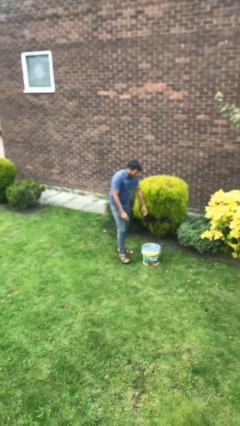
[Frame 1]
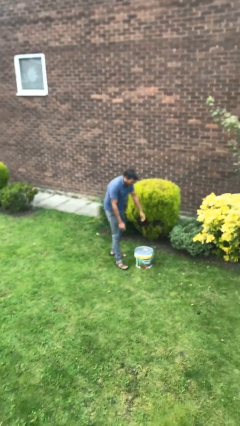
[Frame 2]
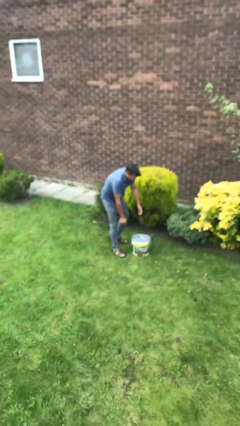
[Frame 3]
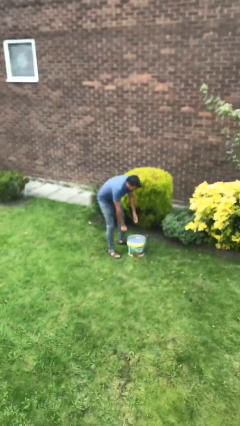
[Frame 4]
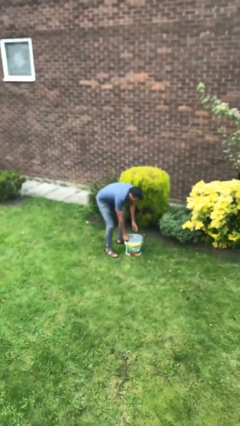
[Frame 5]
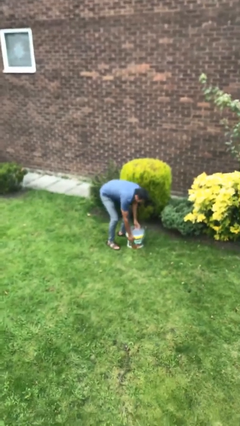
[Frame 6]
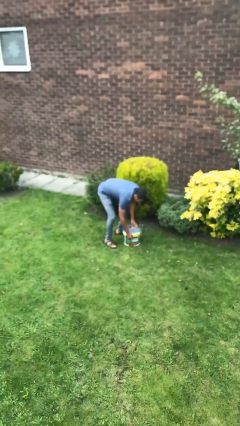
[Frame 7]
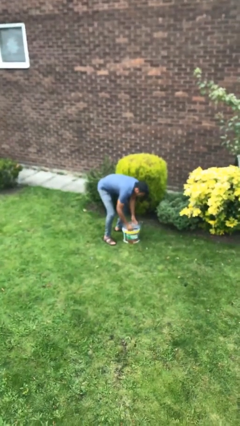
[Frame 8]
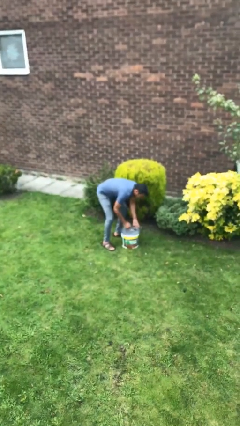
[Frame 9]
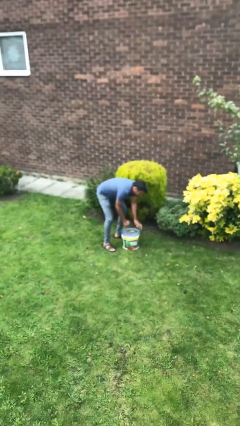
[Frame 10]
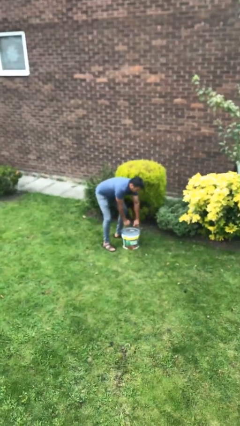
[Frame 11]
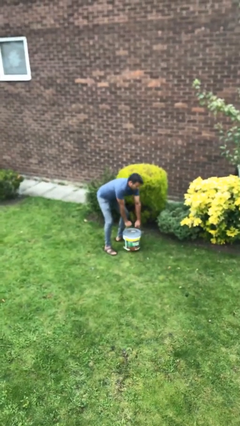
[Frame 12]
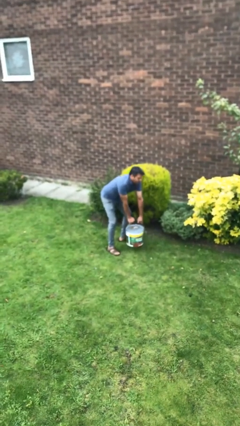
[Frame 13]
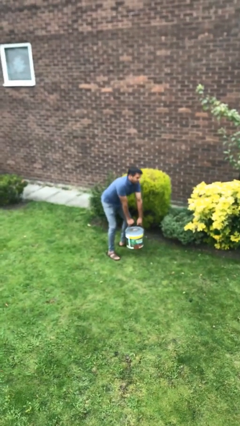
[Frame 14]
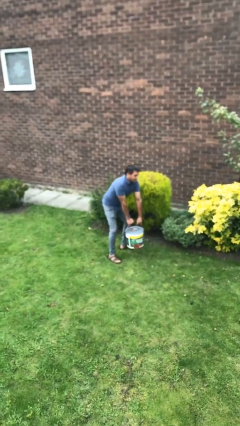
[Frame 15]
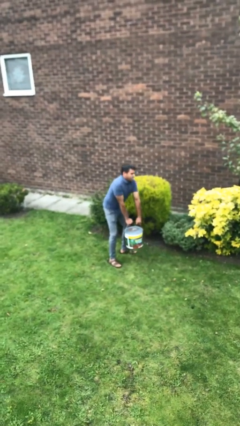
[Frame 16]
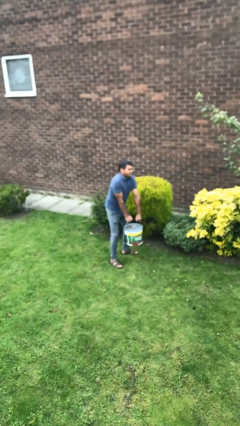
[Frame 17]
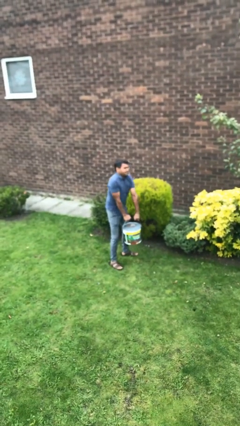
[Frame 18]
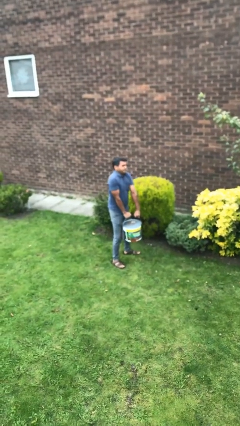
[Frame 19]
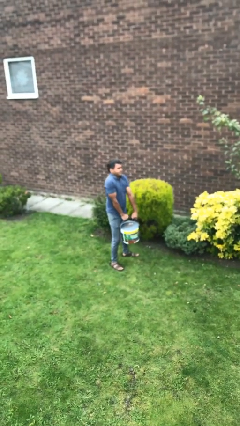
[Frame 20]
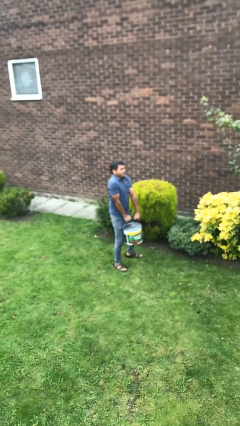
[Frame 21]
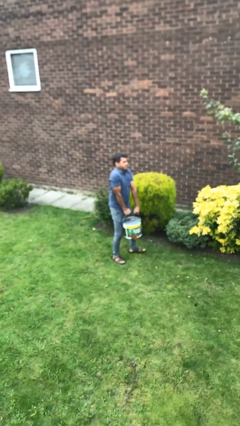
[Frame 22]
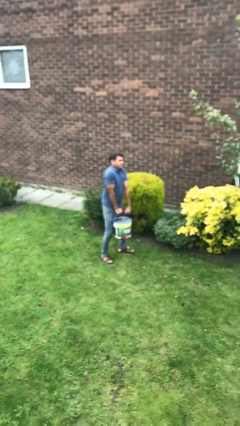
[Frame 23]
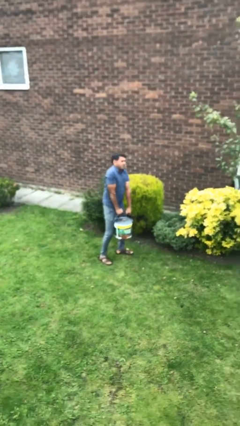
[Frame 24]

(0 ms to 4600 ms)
person picks up object from floor

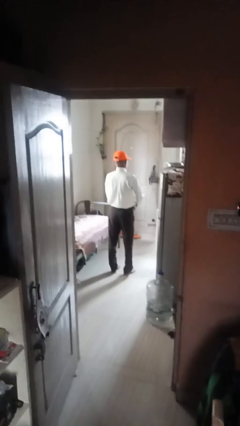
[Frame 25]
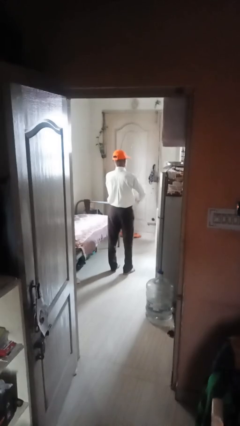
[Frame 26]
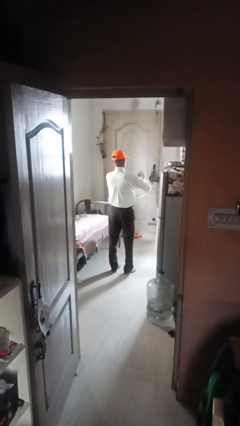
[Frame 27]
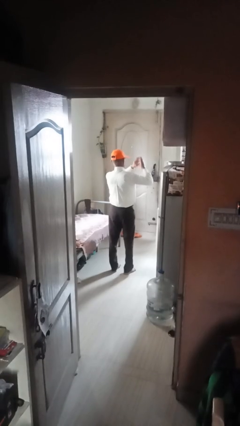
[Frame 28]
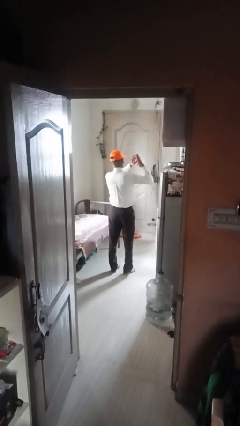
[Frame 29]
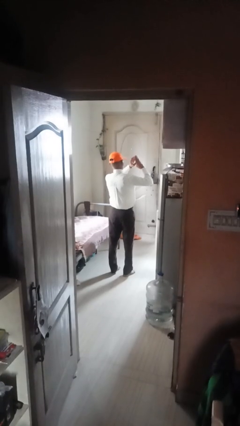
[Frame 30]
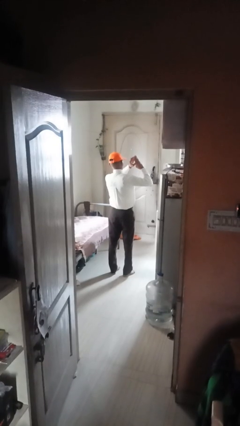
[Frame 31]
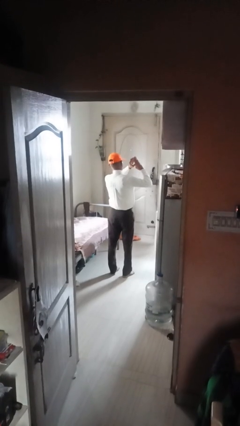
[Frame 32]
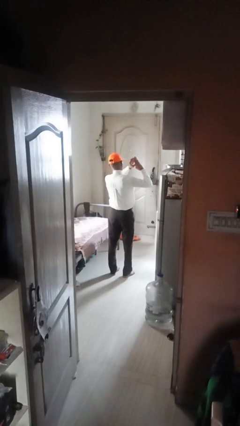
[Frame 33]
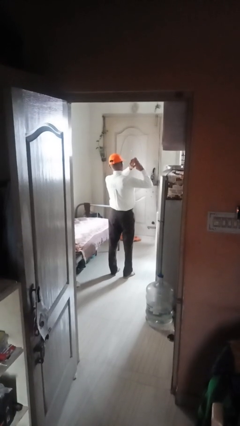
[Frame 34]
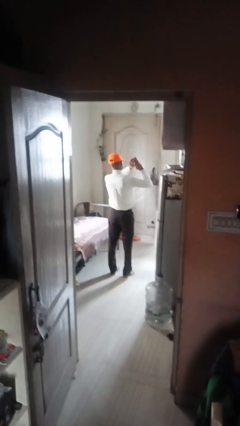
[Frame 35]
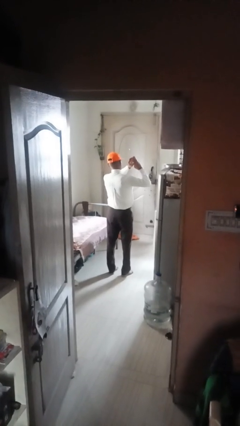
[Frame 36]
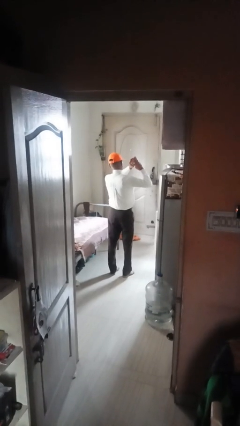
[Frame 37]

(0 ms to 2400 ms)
person gestures heart

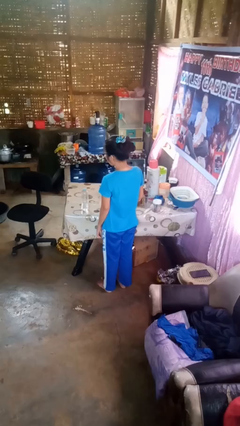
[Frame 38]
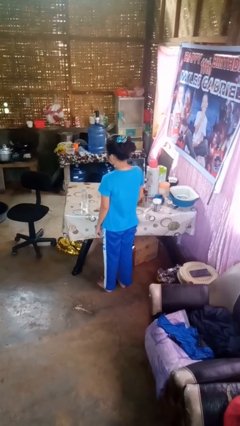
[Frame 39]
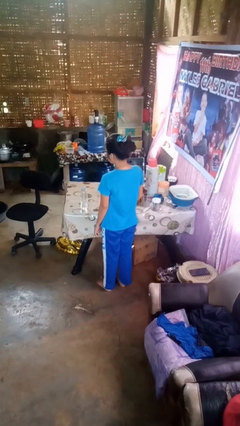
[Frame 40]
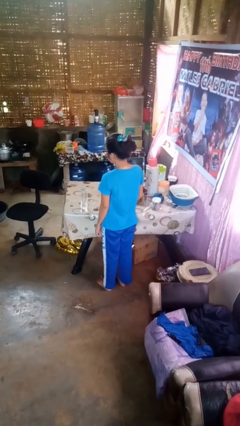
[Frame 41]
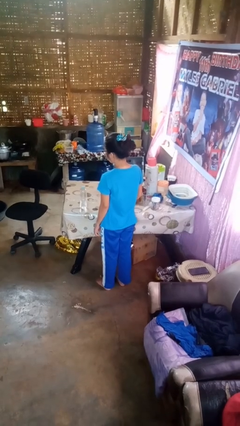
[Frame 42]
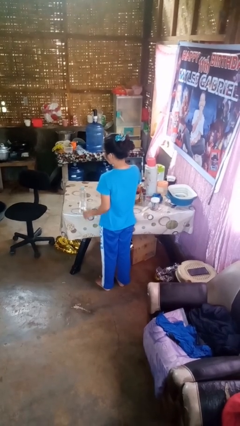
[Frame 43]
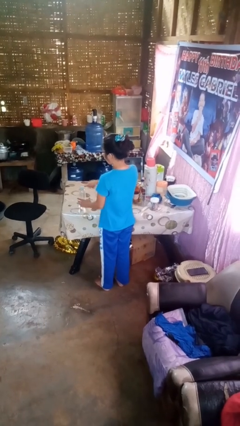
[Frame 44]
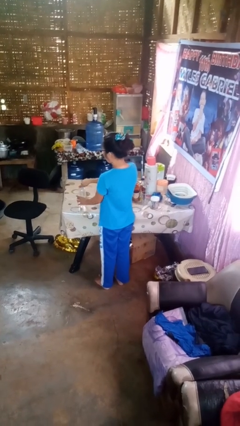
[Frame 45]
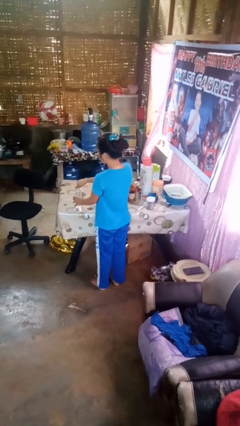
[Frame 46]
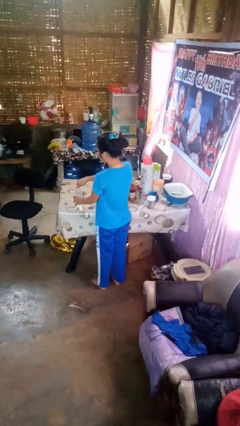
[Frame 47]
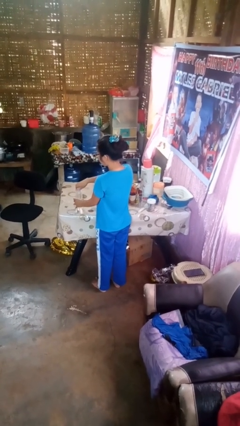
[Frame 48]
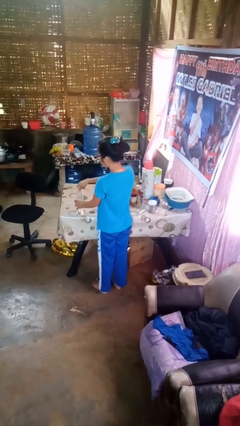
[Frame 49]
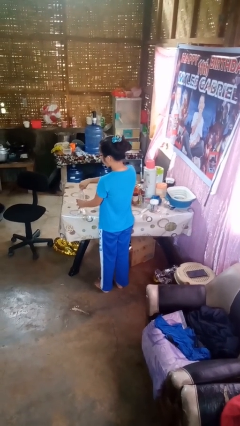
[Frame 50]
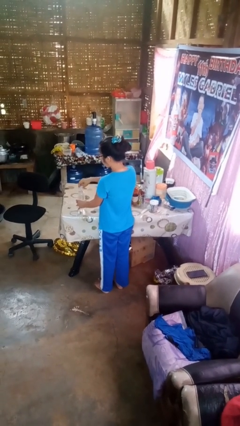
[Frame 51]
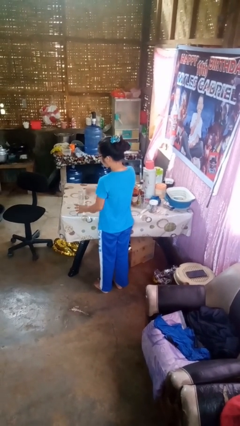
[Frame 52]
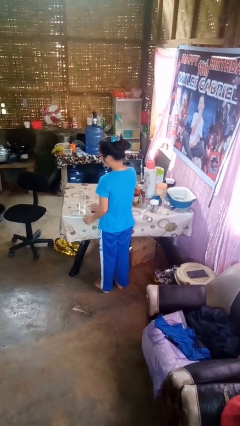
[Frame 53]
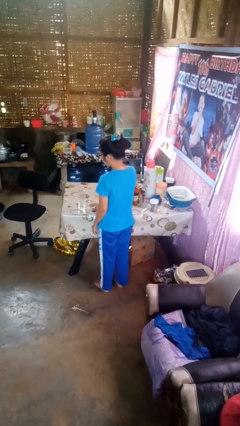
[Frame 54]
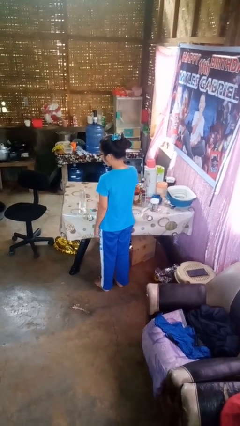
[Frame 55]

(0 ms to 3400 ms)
person unscrews lid from bottle

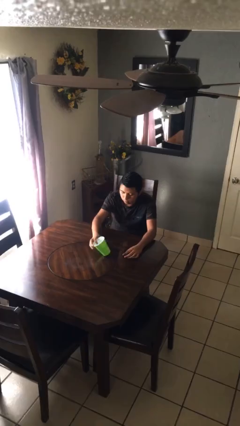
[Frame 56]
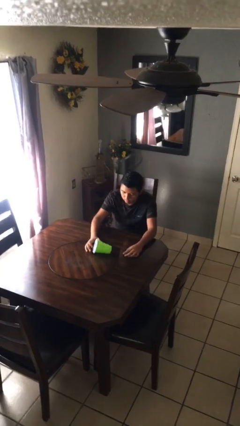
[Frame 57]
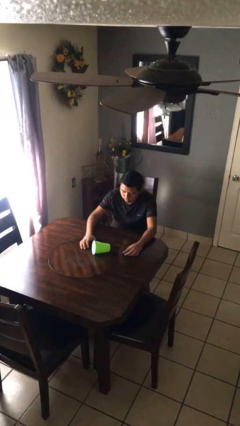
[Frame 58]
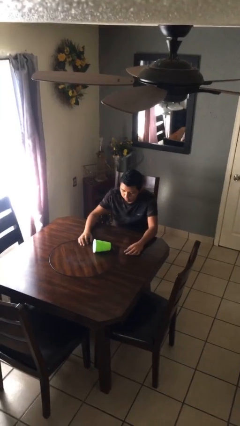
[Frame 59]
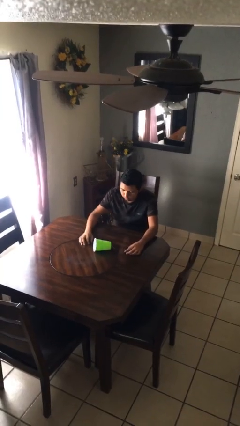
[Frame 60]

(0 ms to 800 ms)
person knocks over glass

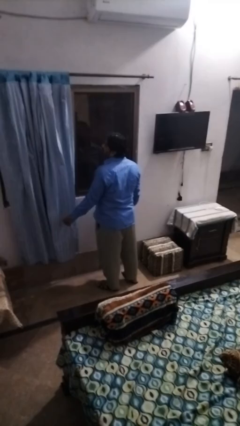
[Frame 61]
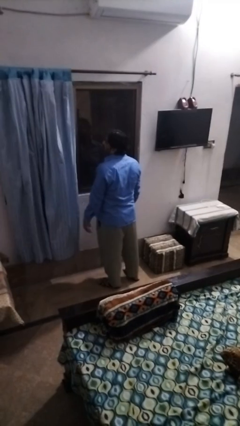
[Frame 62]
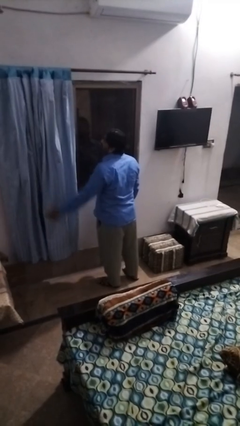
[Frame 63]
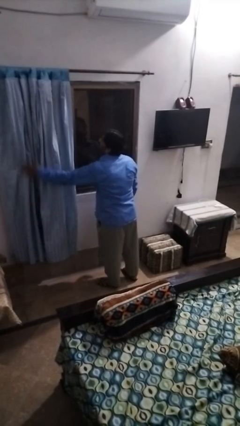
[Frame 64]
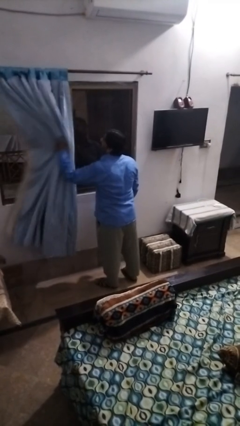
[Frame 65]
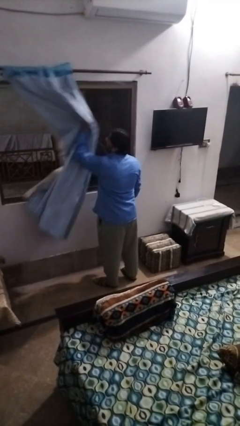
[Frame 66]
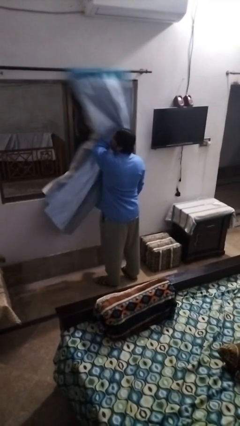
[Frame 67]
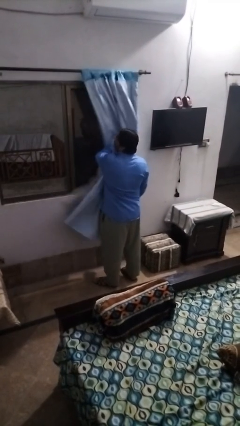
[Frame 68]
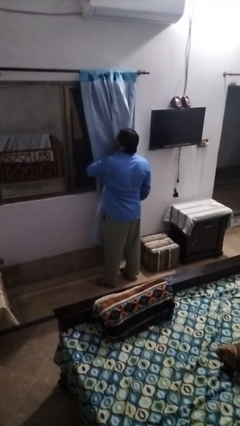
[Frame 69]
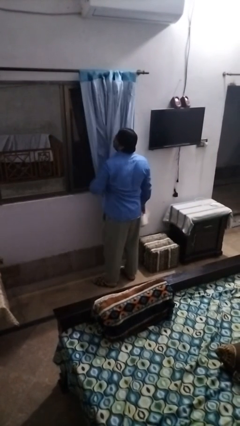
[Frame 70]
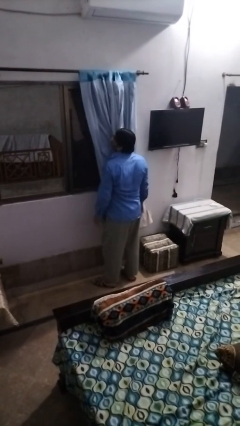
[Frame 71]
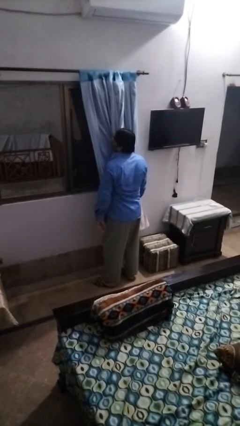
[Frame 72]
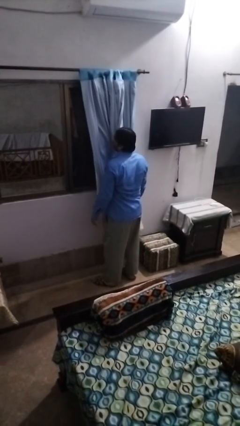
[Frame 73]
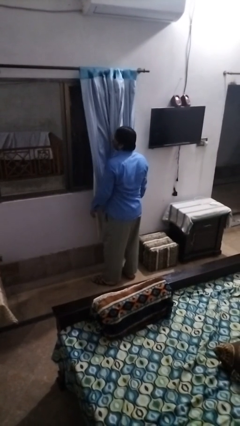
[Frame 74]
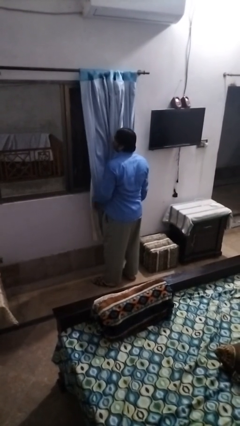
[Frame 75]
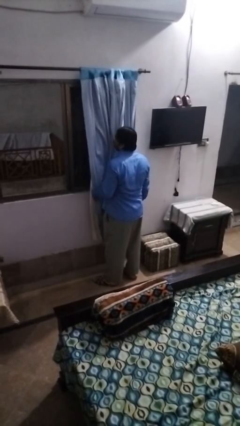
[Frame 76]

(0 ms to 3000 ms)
person opens curtains

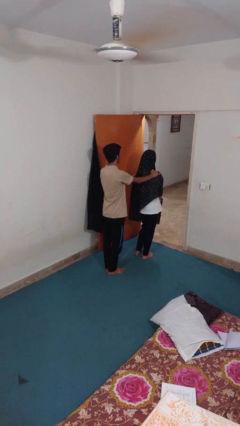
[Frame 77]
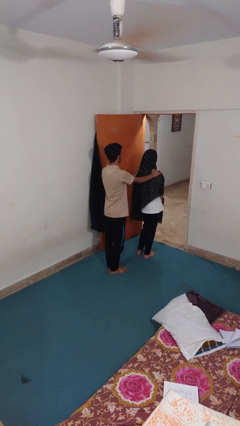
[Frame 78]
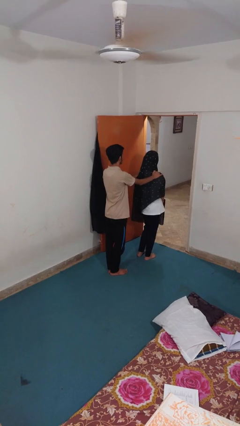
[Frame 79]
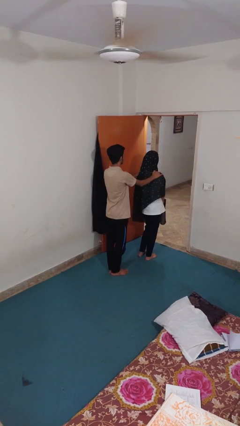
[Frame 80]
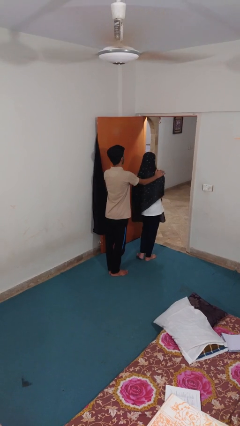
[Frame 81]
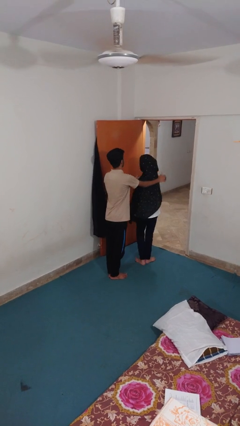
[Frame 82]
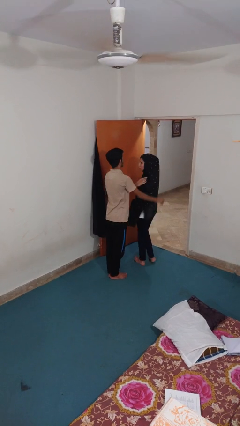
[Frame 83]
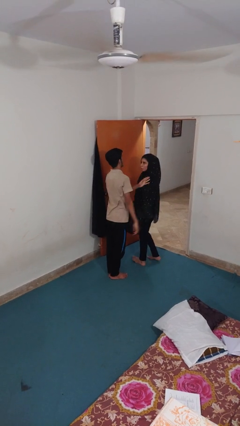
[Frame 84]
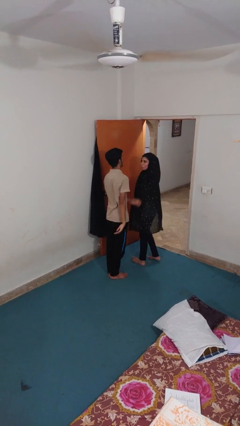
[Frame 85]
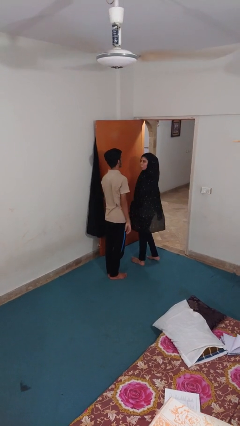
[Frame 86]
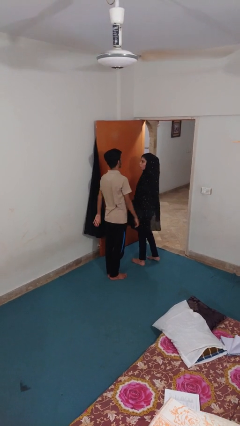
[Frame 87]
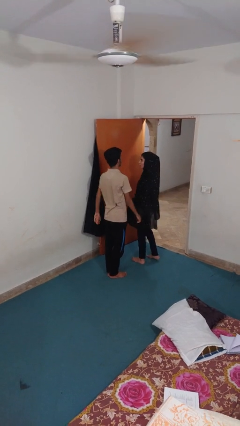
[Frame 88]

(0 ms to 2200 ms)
person spins person around

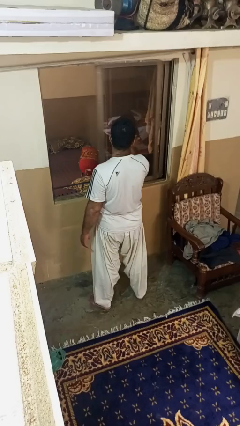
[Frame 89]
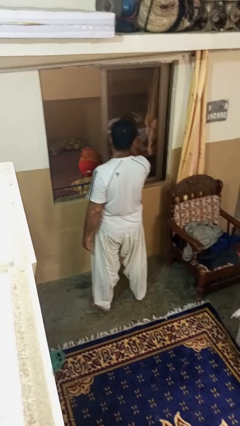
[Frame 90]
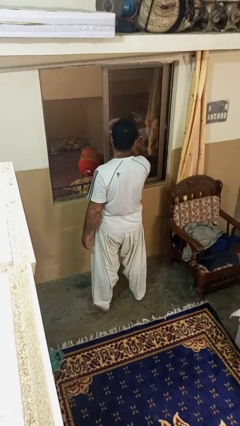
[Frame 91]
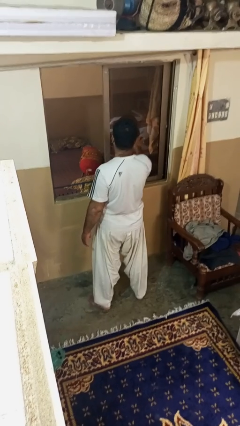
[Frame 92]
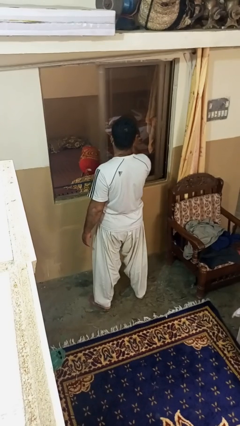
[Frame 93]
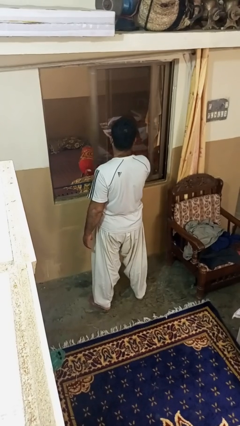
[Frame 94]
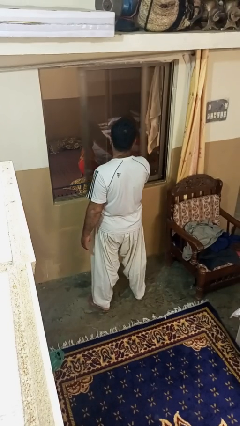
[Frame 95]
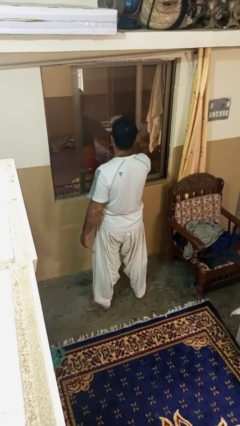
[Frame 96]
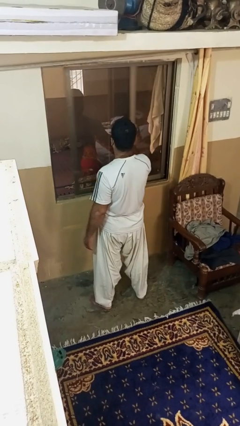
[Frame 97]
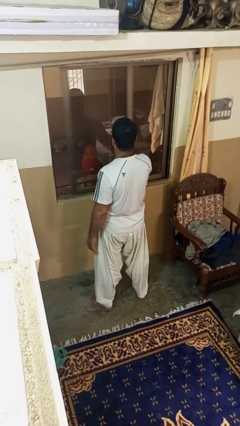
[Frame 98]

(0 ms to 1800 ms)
person closes home window
